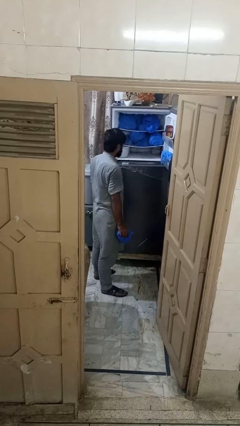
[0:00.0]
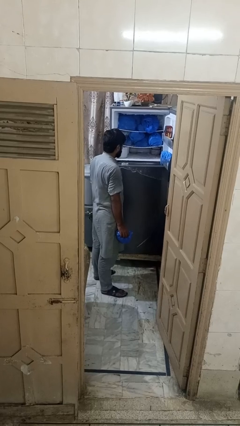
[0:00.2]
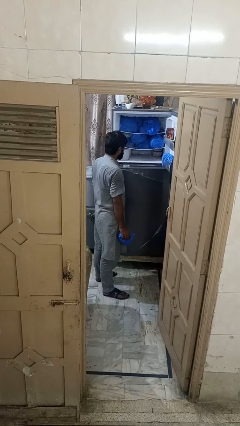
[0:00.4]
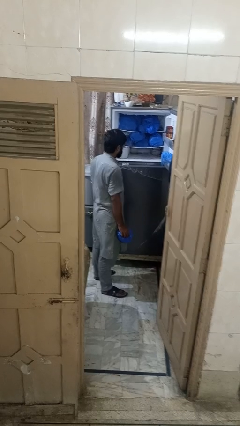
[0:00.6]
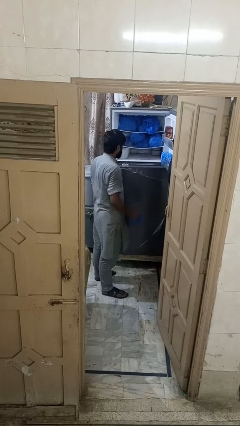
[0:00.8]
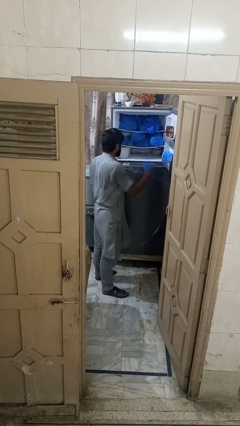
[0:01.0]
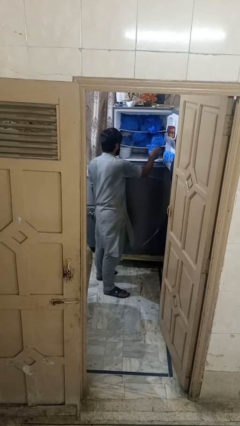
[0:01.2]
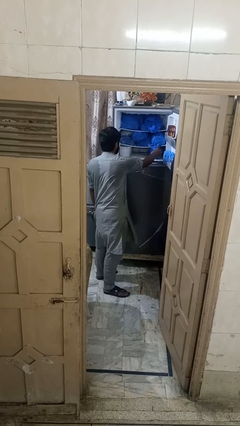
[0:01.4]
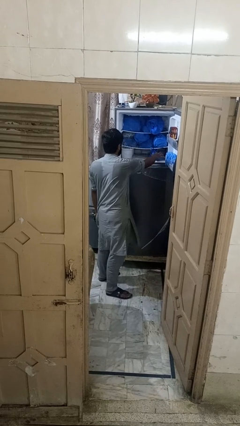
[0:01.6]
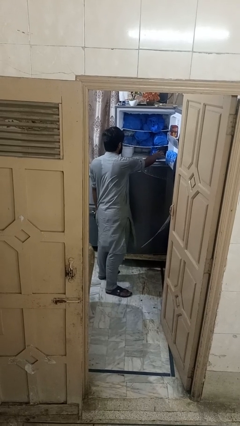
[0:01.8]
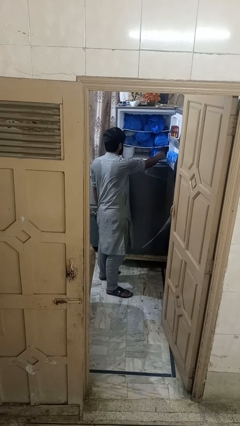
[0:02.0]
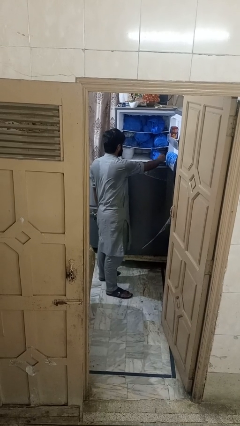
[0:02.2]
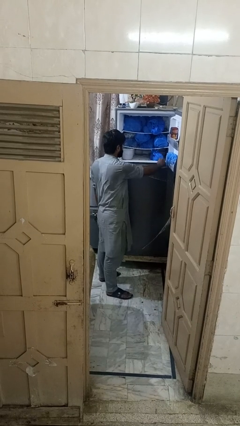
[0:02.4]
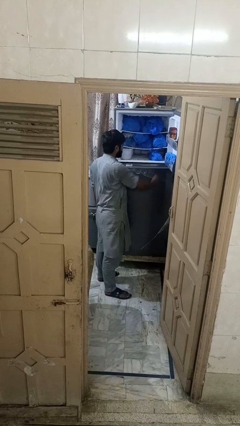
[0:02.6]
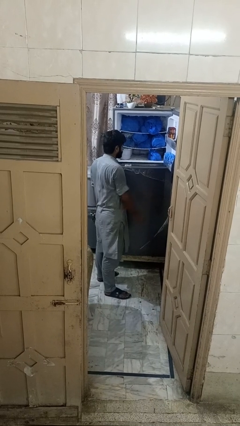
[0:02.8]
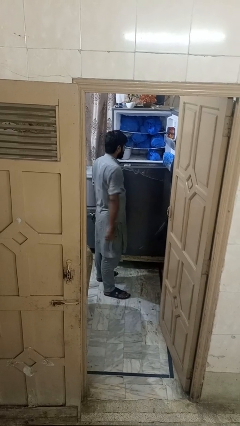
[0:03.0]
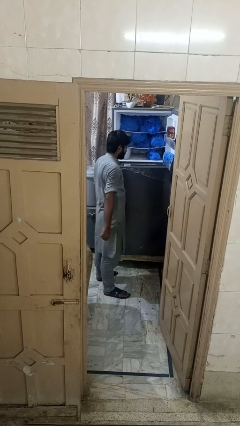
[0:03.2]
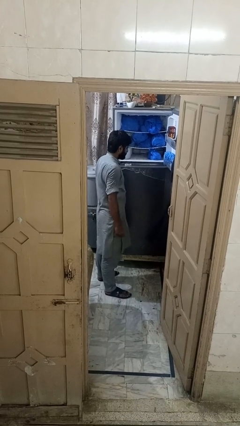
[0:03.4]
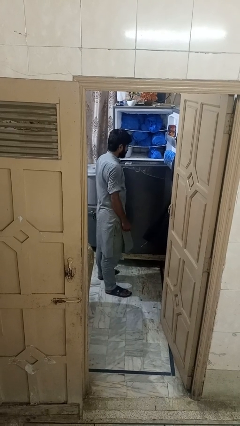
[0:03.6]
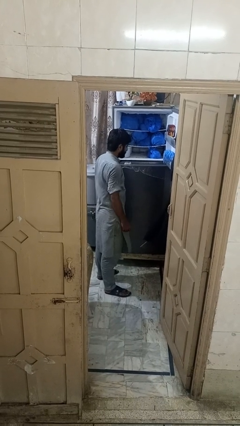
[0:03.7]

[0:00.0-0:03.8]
person loads groceries into refrigerator

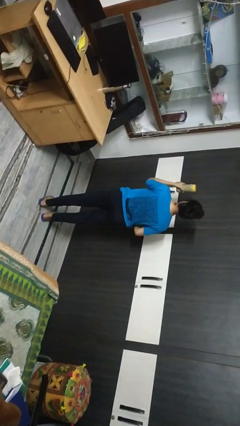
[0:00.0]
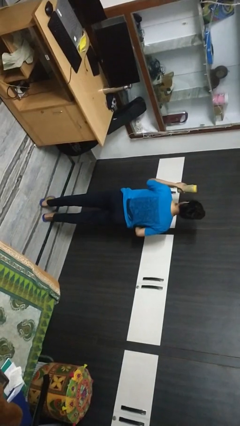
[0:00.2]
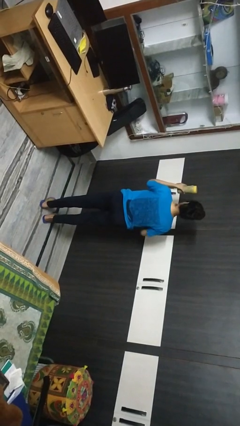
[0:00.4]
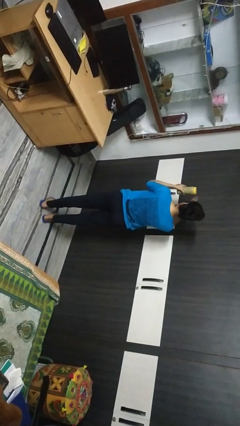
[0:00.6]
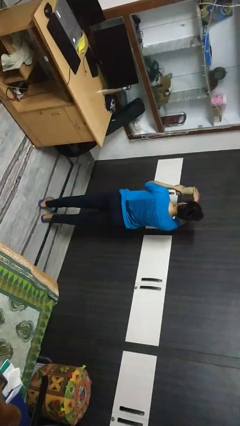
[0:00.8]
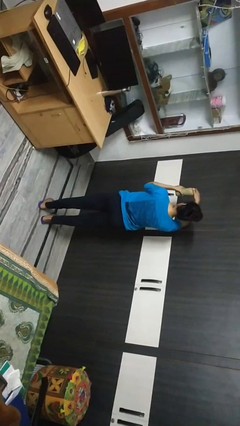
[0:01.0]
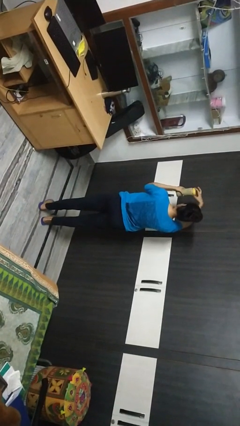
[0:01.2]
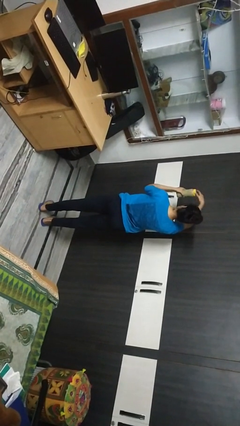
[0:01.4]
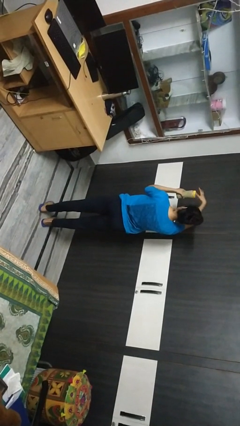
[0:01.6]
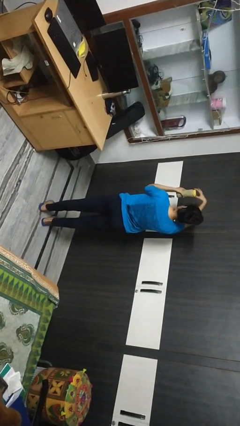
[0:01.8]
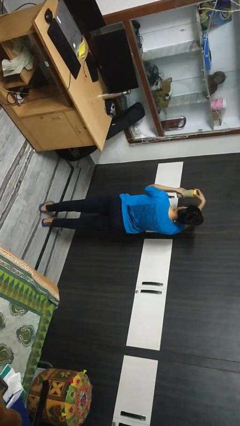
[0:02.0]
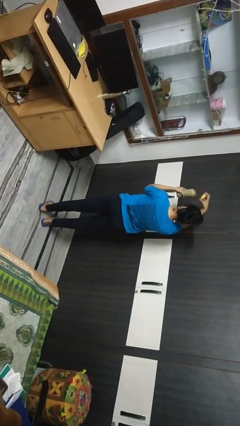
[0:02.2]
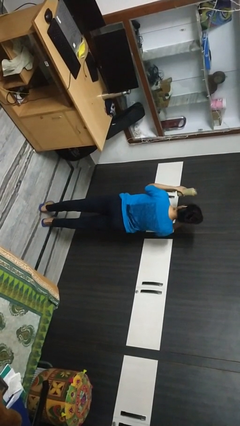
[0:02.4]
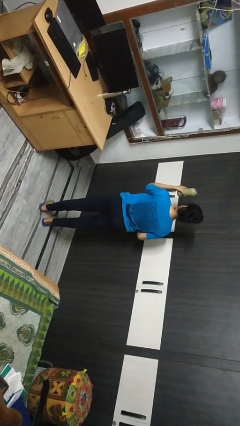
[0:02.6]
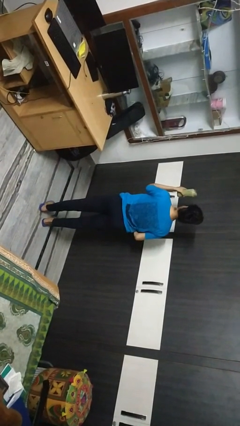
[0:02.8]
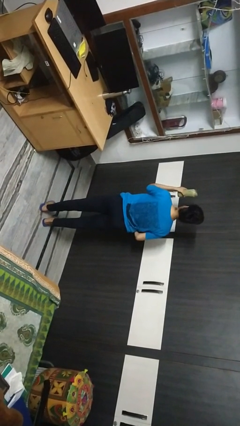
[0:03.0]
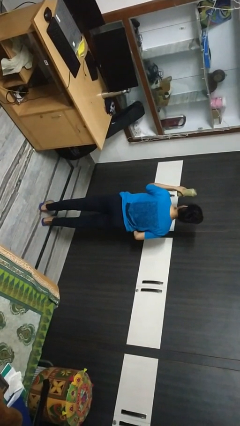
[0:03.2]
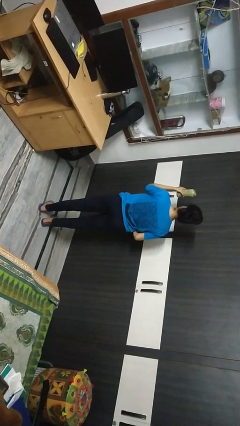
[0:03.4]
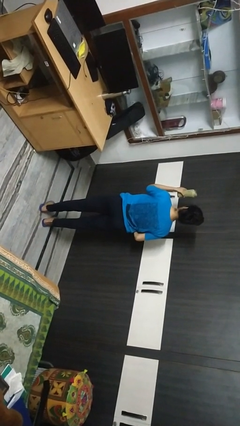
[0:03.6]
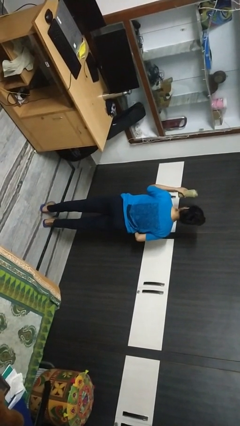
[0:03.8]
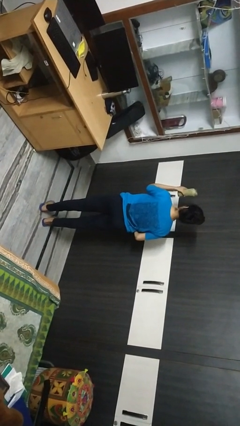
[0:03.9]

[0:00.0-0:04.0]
person opens jar

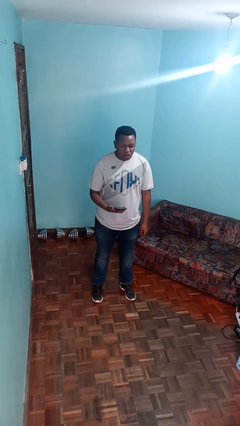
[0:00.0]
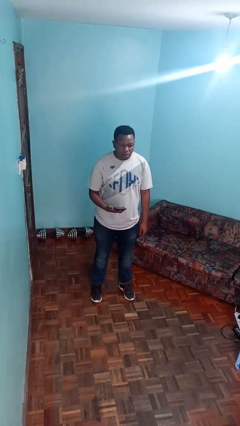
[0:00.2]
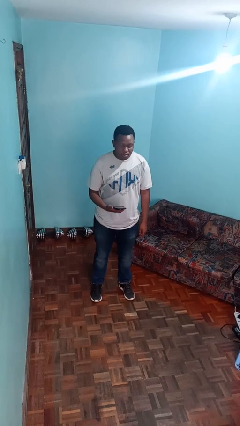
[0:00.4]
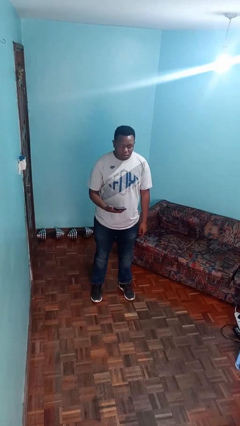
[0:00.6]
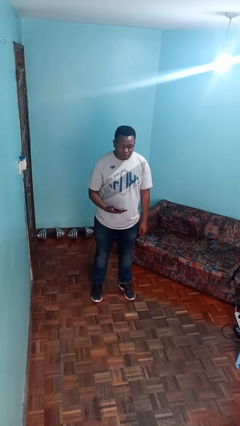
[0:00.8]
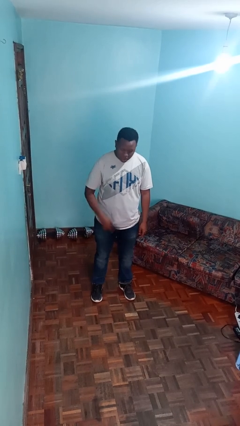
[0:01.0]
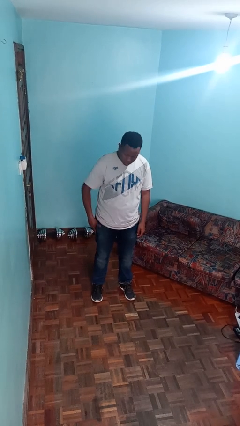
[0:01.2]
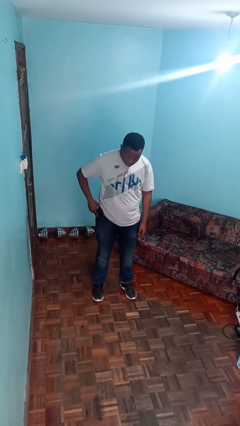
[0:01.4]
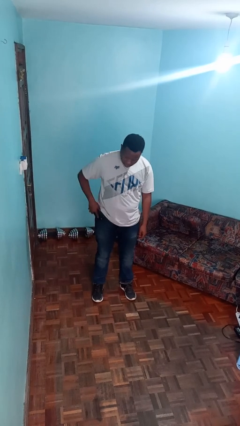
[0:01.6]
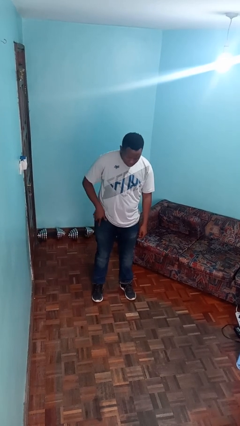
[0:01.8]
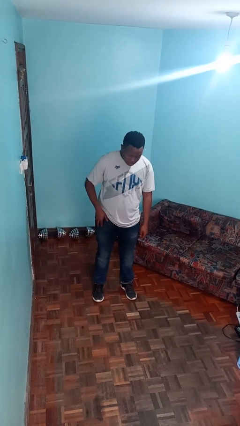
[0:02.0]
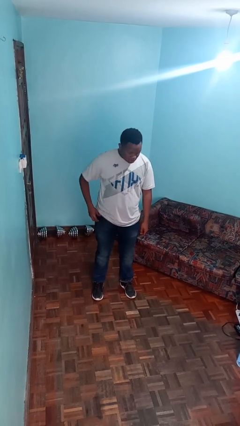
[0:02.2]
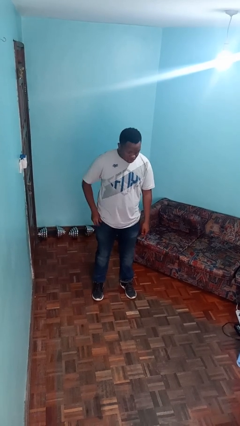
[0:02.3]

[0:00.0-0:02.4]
person puts phone into pocket

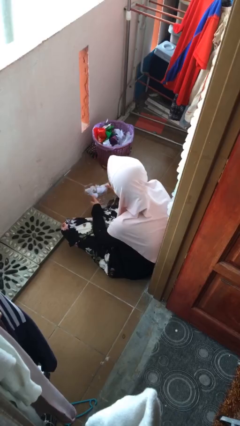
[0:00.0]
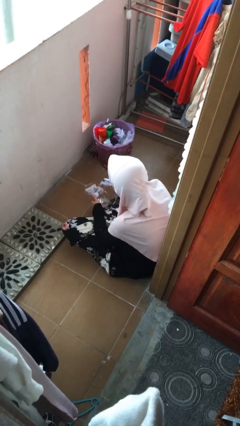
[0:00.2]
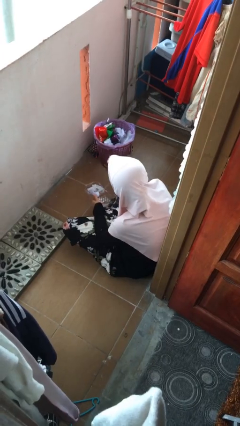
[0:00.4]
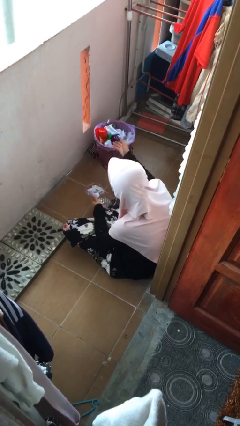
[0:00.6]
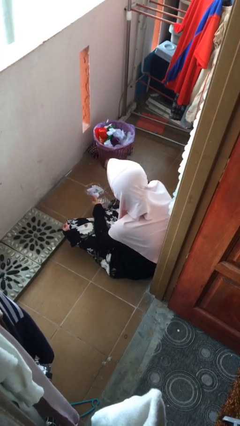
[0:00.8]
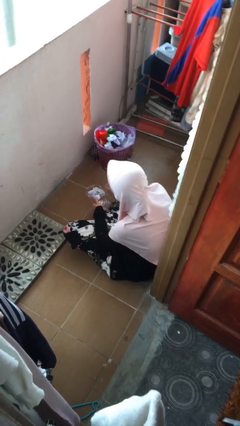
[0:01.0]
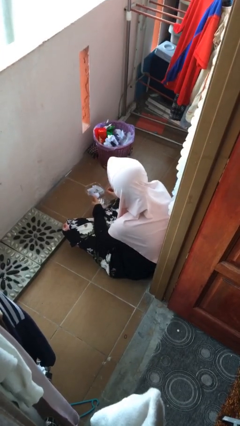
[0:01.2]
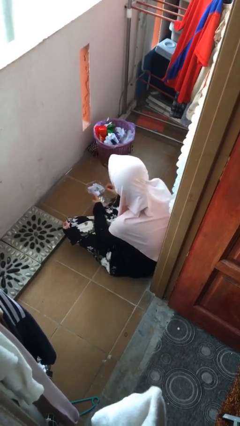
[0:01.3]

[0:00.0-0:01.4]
person discards trash

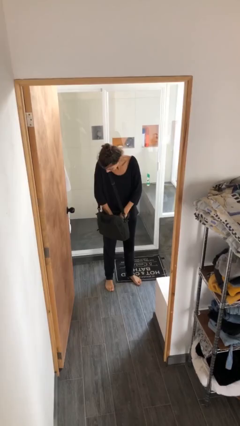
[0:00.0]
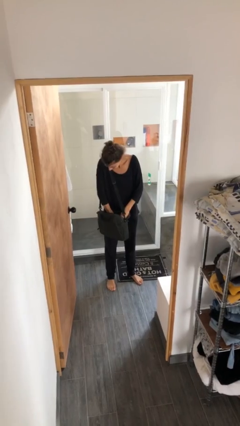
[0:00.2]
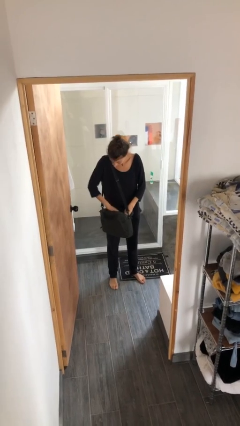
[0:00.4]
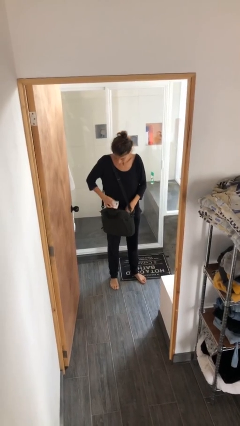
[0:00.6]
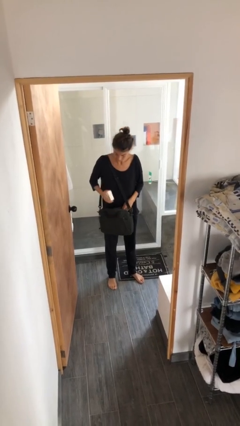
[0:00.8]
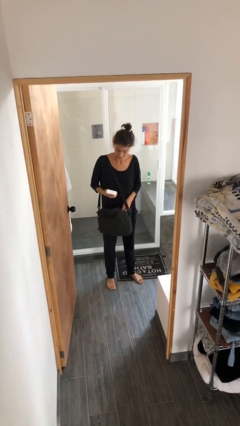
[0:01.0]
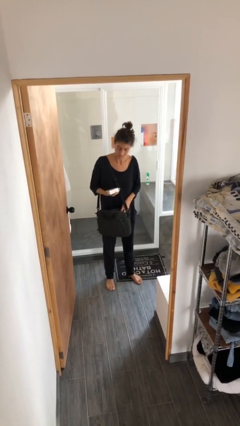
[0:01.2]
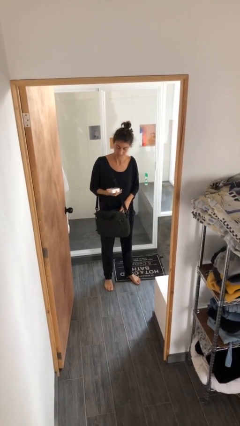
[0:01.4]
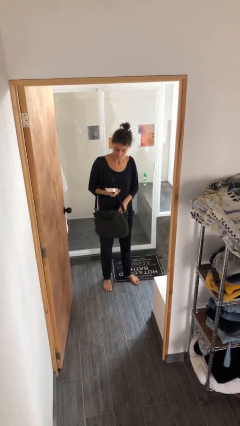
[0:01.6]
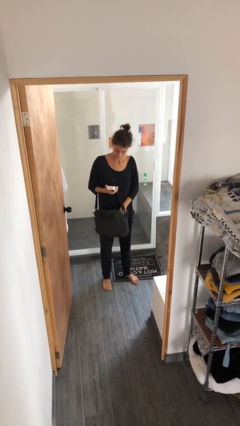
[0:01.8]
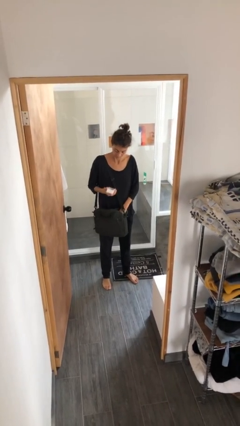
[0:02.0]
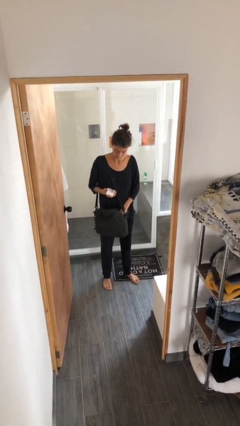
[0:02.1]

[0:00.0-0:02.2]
person takes object from purse

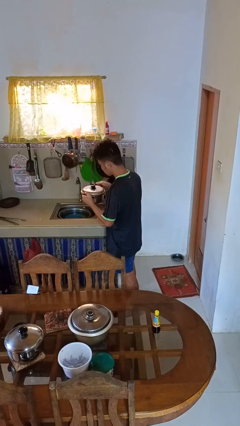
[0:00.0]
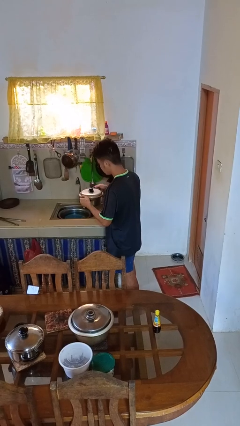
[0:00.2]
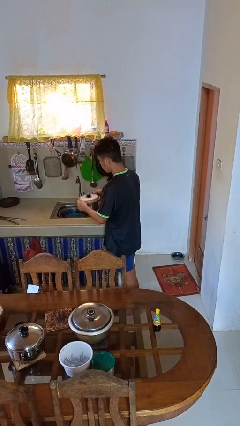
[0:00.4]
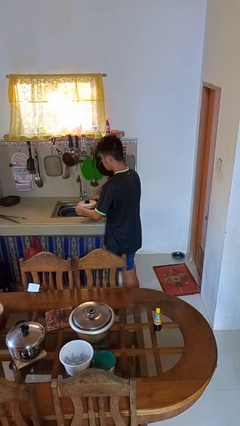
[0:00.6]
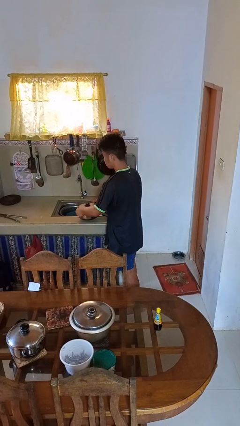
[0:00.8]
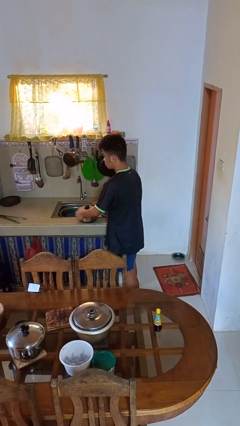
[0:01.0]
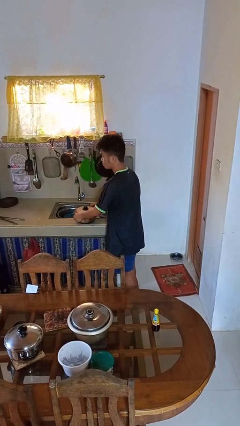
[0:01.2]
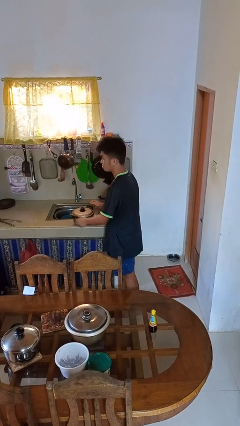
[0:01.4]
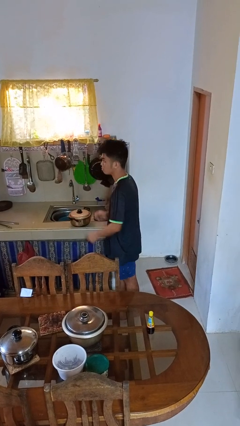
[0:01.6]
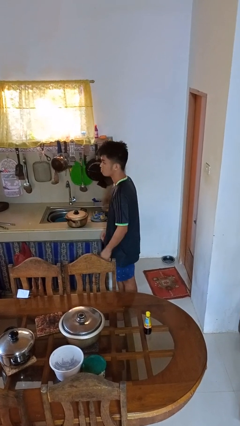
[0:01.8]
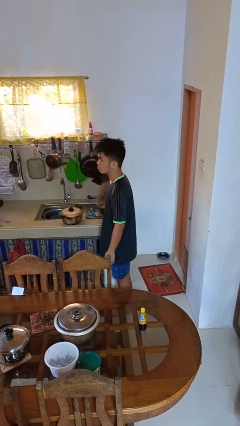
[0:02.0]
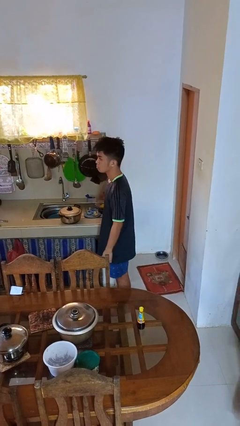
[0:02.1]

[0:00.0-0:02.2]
person puts down object on countertop

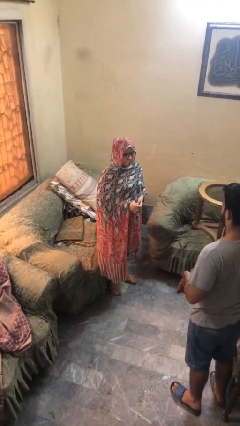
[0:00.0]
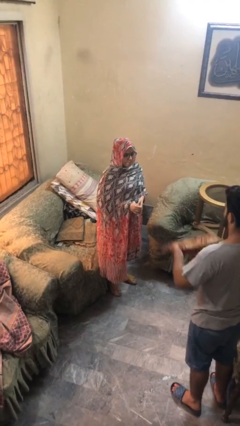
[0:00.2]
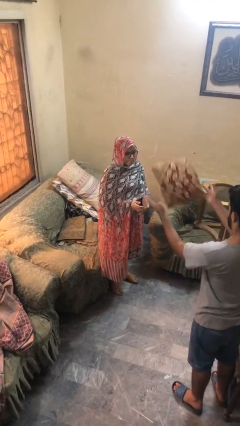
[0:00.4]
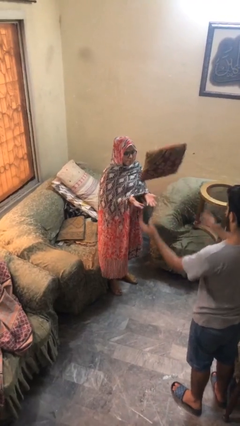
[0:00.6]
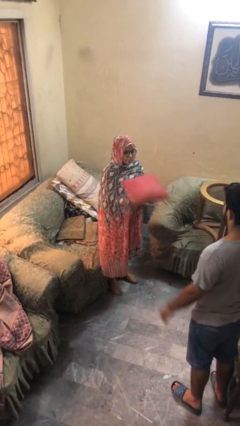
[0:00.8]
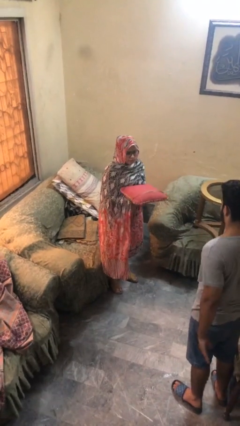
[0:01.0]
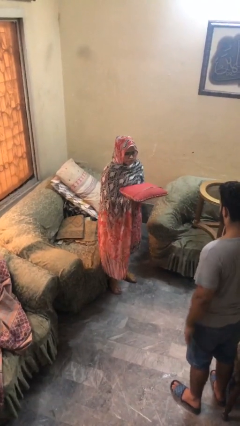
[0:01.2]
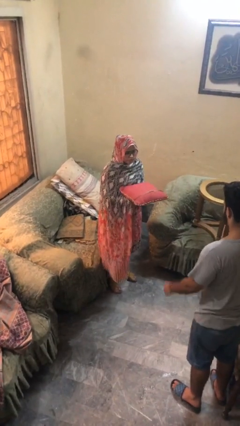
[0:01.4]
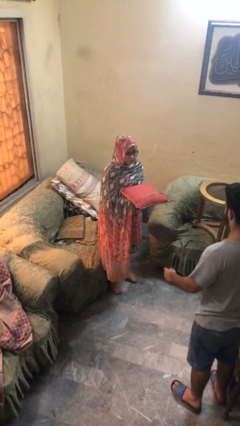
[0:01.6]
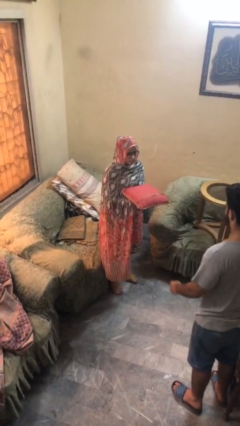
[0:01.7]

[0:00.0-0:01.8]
person catches object from person
